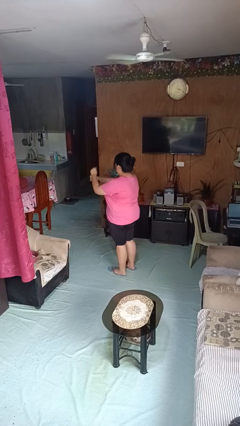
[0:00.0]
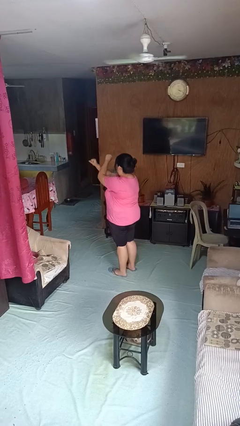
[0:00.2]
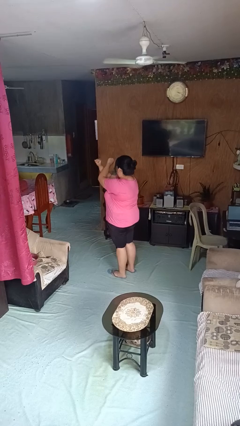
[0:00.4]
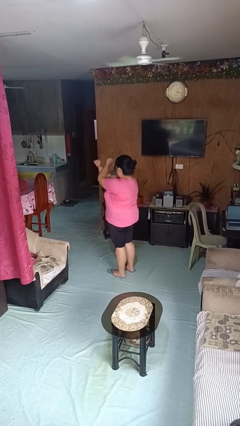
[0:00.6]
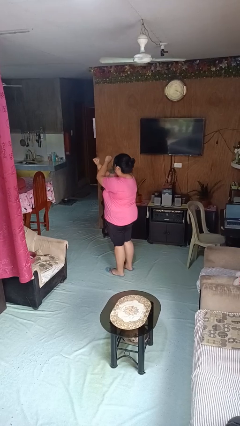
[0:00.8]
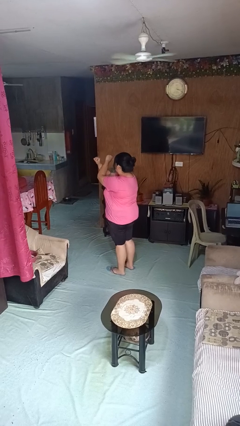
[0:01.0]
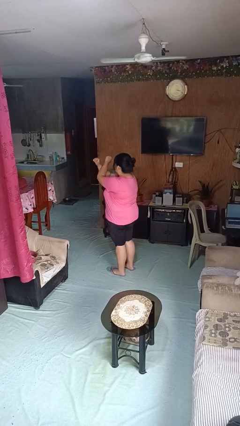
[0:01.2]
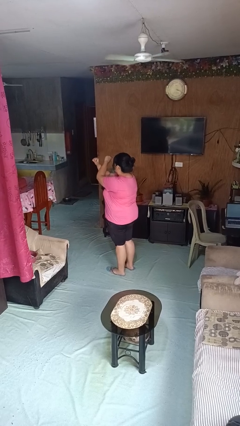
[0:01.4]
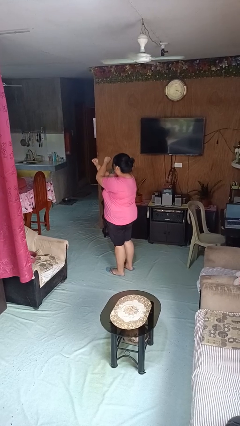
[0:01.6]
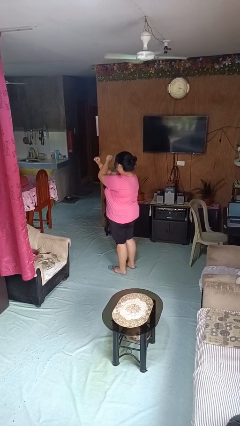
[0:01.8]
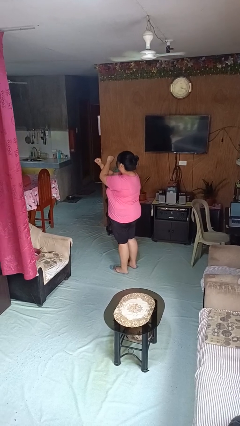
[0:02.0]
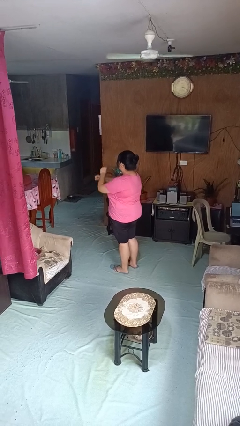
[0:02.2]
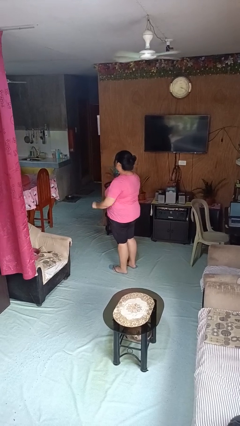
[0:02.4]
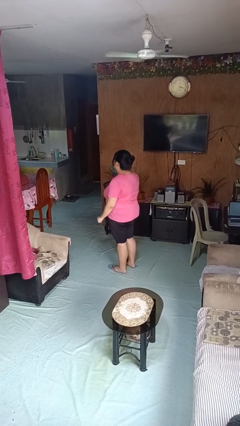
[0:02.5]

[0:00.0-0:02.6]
person gestures arms x

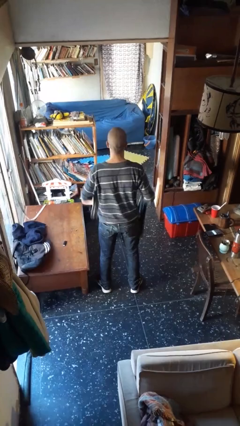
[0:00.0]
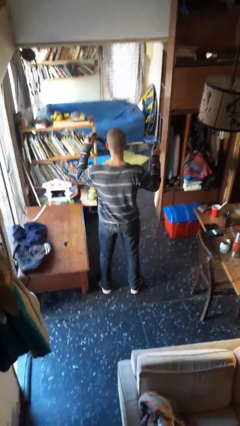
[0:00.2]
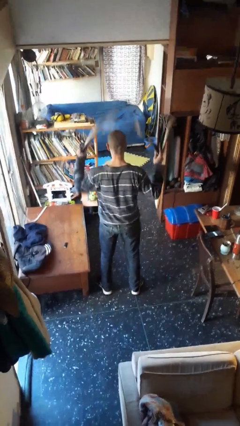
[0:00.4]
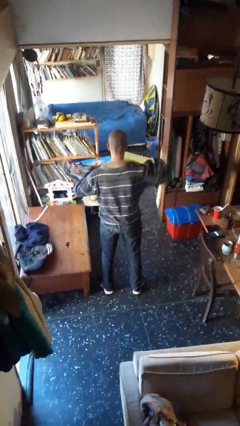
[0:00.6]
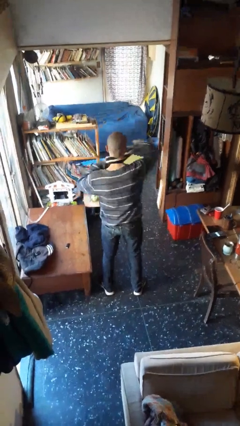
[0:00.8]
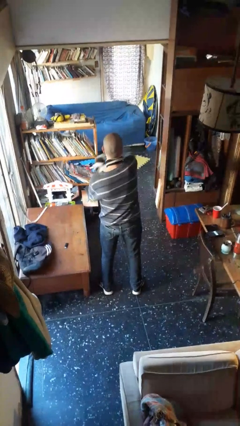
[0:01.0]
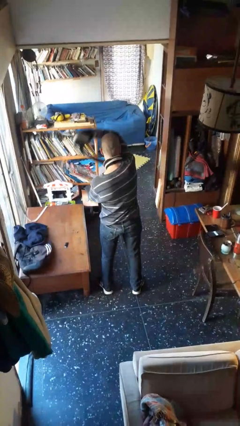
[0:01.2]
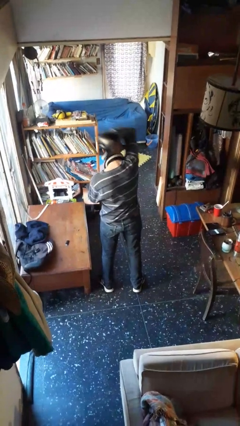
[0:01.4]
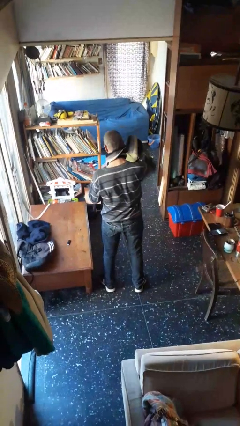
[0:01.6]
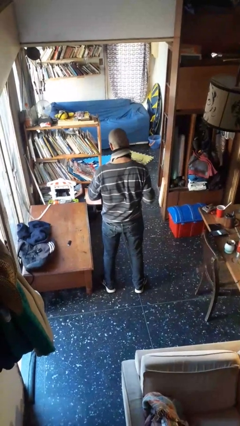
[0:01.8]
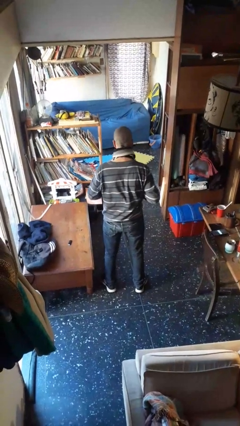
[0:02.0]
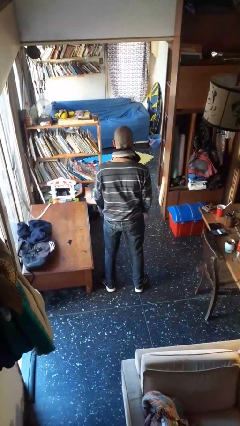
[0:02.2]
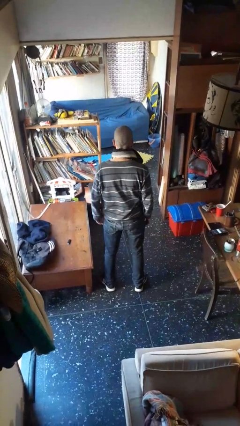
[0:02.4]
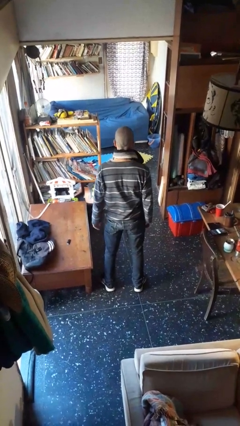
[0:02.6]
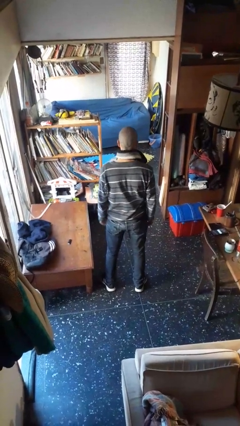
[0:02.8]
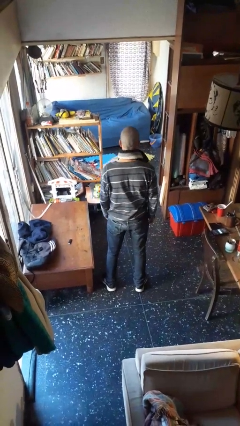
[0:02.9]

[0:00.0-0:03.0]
person puts on scarf

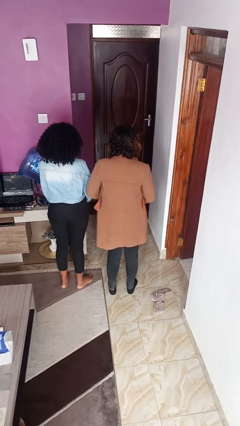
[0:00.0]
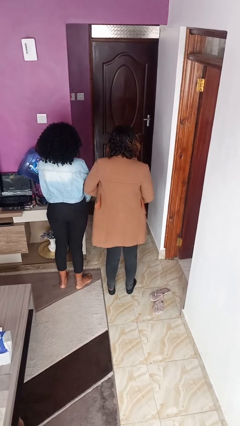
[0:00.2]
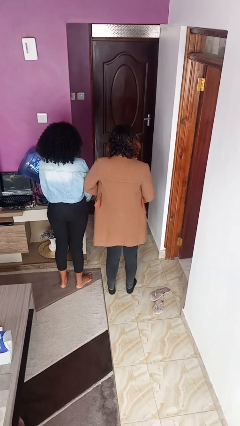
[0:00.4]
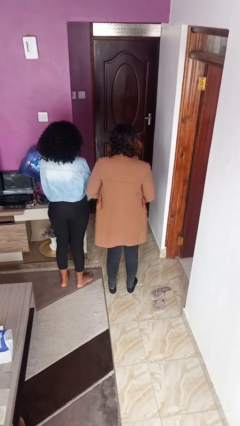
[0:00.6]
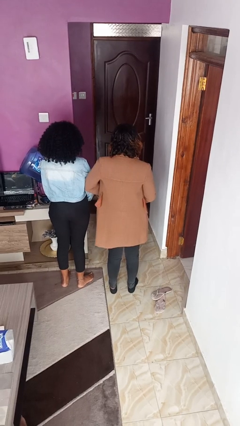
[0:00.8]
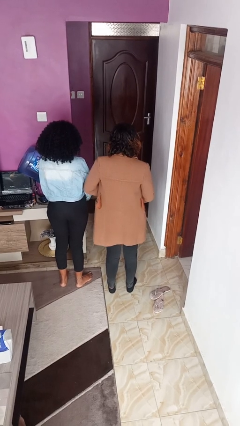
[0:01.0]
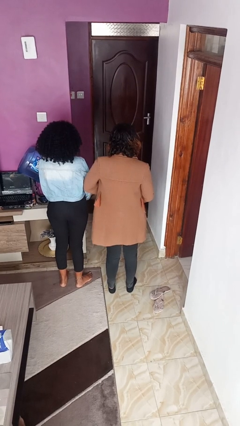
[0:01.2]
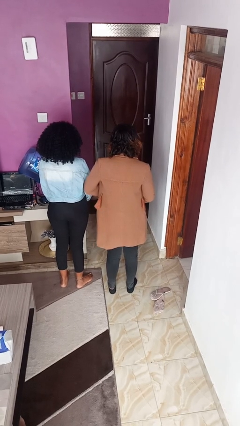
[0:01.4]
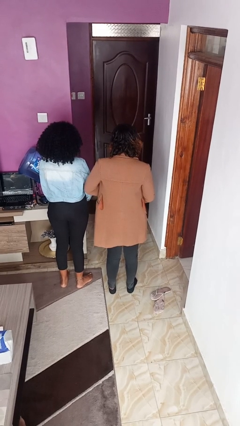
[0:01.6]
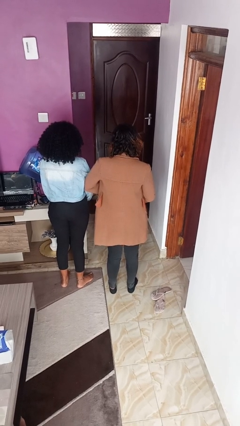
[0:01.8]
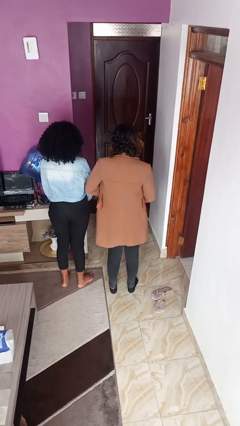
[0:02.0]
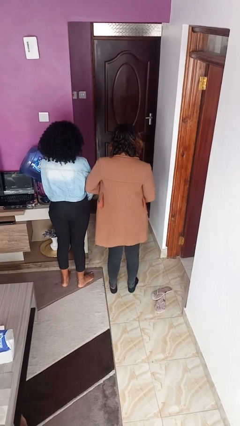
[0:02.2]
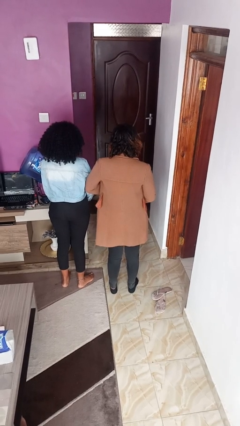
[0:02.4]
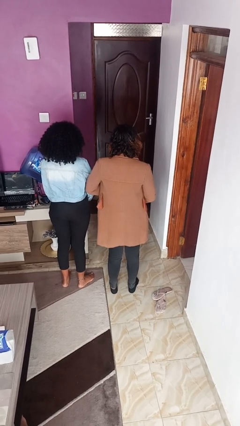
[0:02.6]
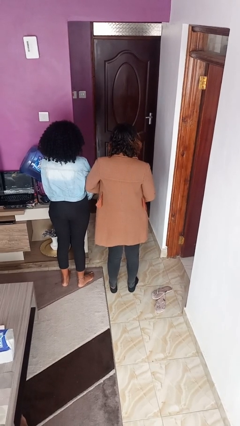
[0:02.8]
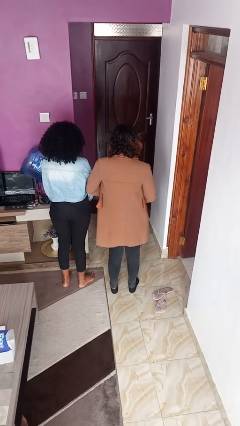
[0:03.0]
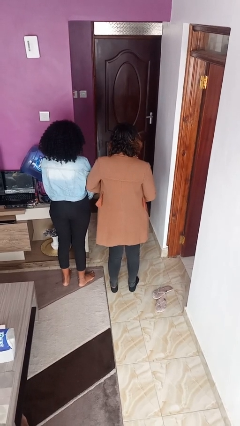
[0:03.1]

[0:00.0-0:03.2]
person nudges person with elbow

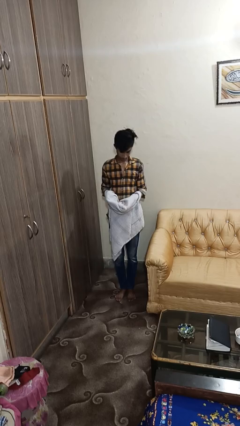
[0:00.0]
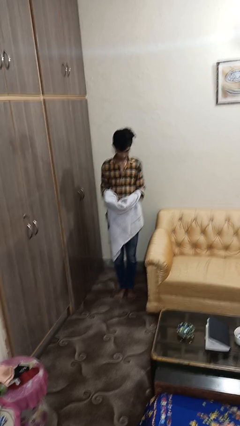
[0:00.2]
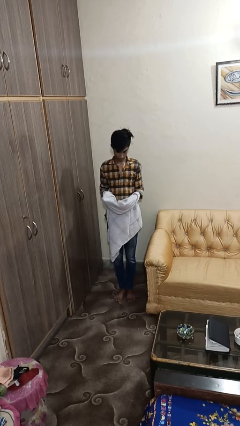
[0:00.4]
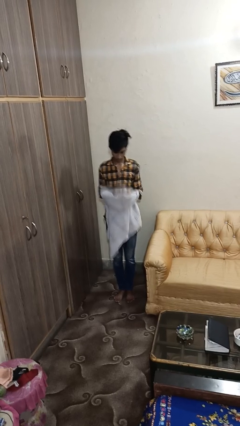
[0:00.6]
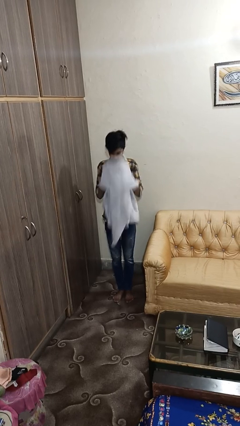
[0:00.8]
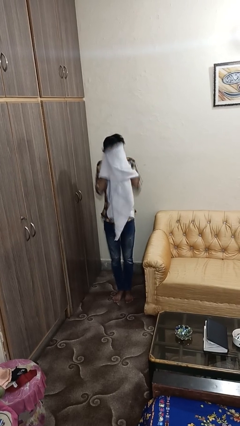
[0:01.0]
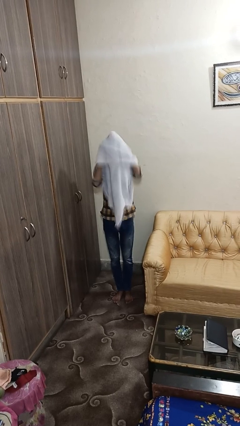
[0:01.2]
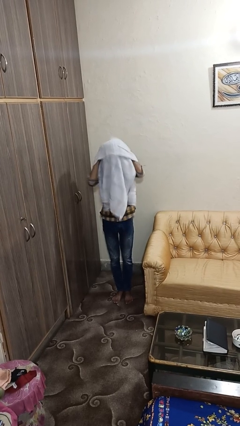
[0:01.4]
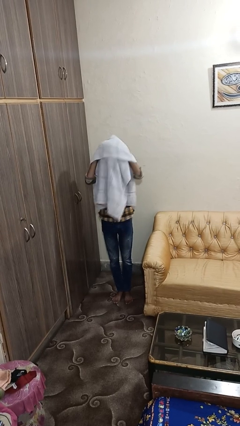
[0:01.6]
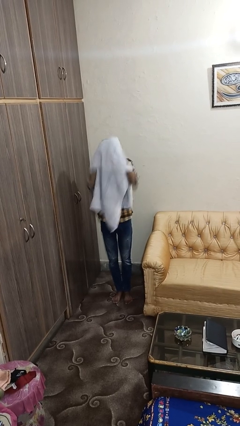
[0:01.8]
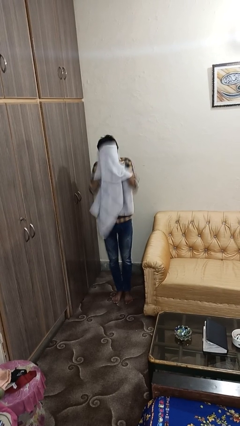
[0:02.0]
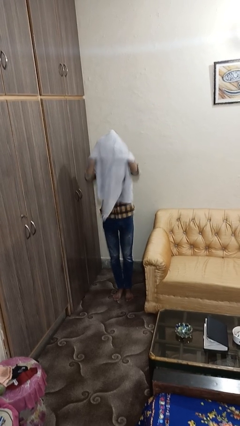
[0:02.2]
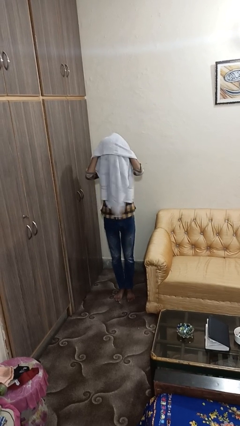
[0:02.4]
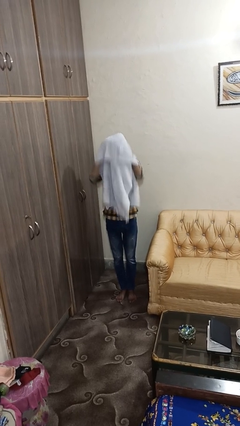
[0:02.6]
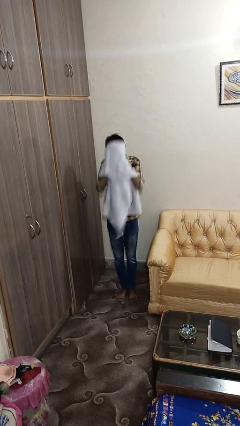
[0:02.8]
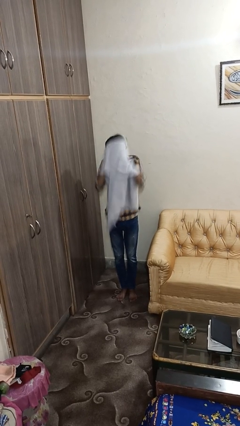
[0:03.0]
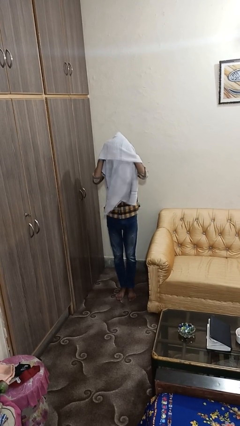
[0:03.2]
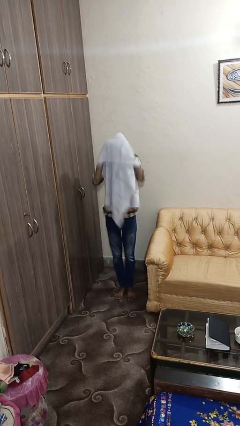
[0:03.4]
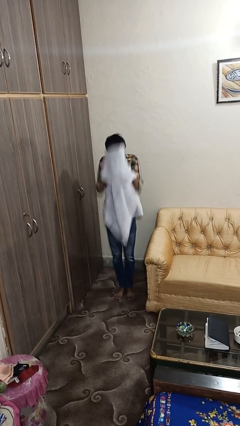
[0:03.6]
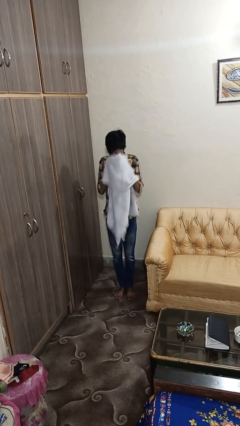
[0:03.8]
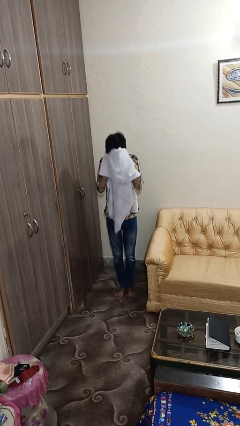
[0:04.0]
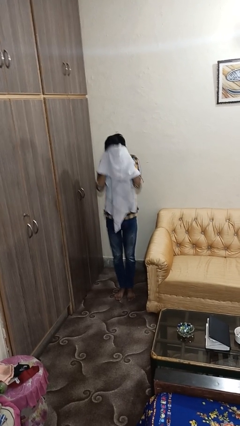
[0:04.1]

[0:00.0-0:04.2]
person dries hair with towel

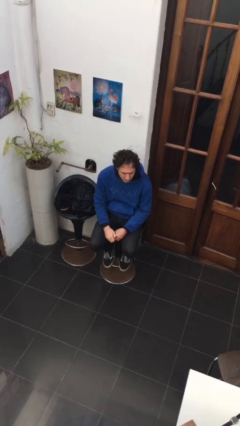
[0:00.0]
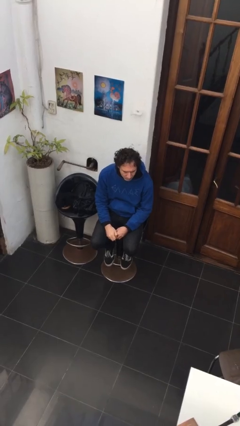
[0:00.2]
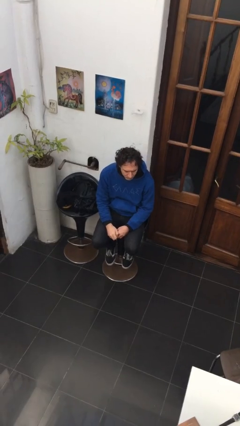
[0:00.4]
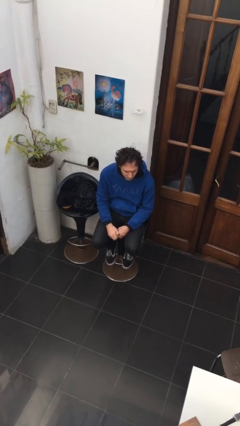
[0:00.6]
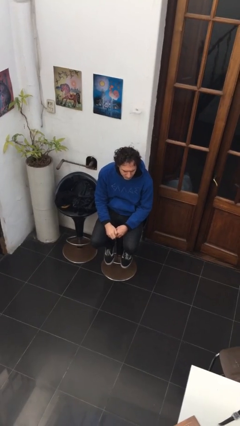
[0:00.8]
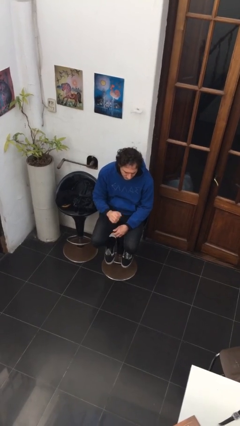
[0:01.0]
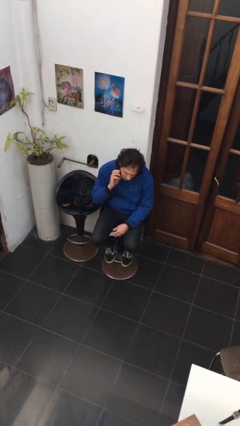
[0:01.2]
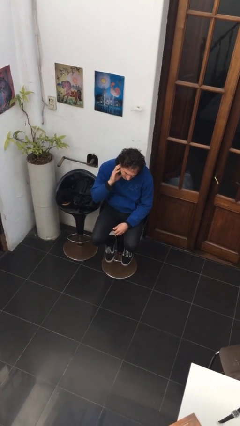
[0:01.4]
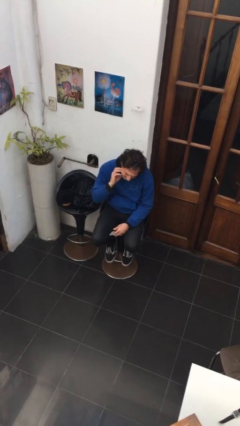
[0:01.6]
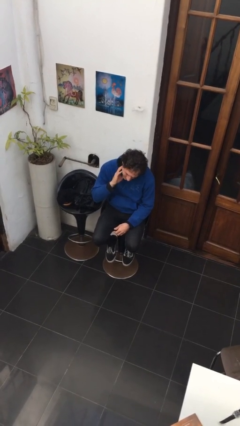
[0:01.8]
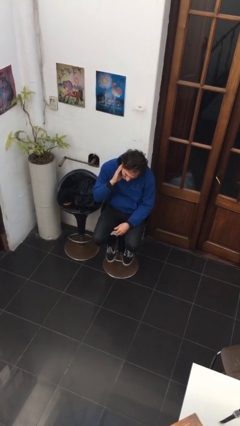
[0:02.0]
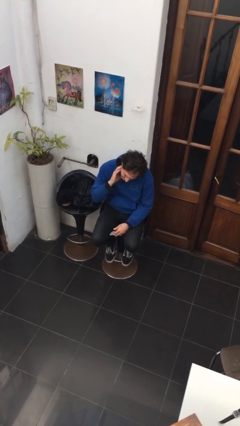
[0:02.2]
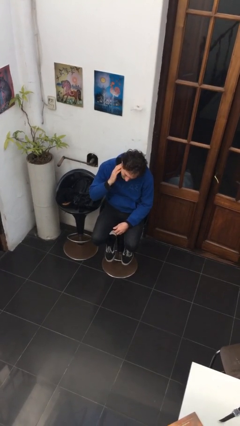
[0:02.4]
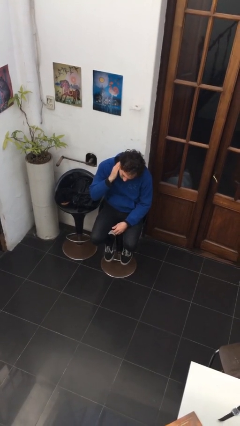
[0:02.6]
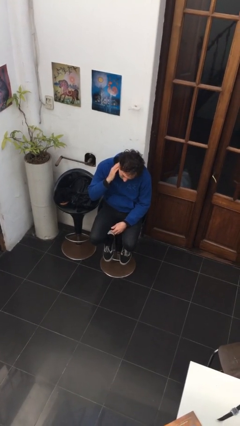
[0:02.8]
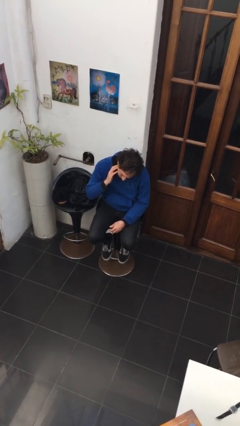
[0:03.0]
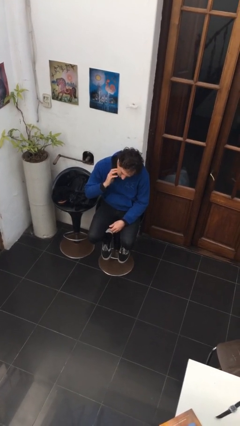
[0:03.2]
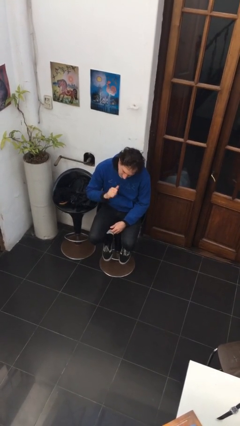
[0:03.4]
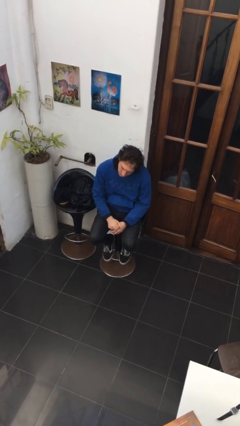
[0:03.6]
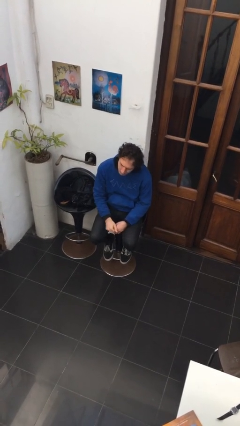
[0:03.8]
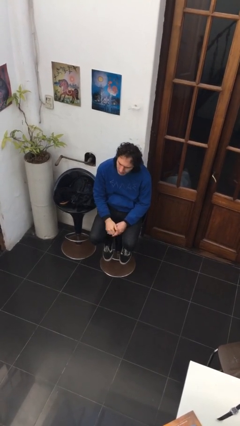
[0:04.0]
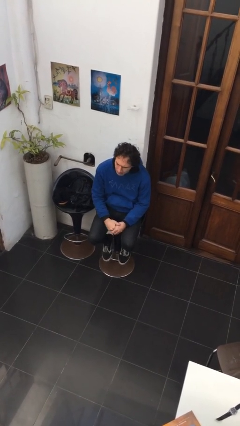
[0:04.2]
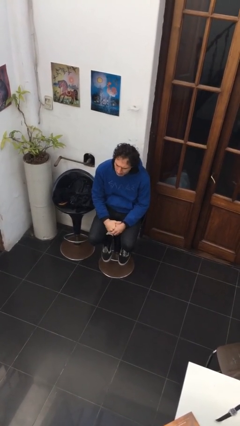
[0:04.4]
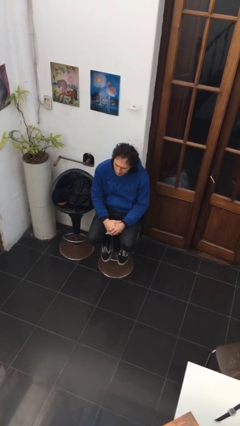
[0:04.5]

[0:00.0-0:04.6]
person scratches face
